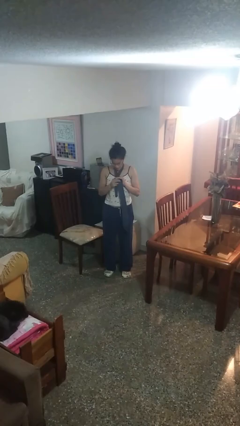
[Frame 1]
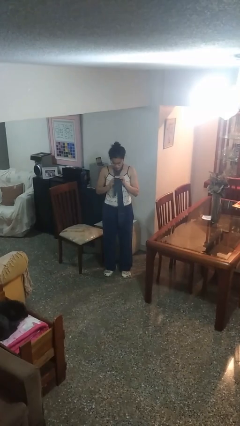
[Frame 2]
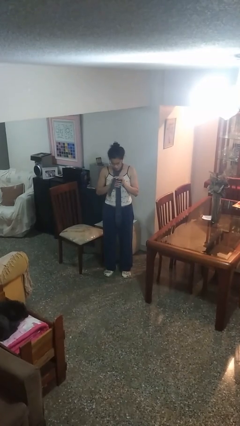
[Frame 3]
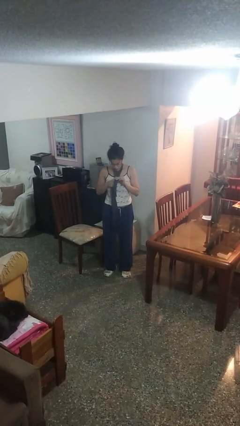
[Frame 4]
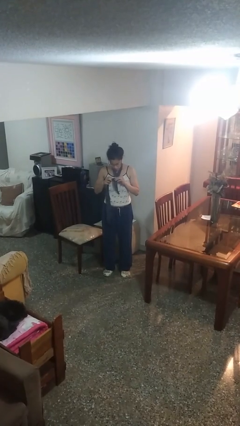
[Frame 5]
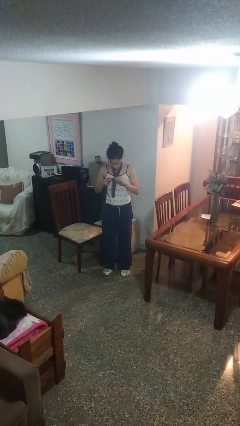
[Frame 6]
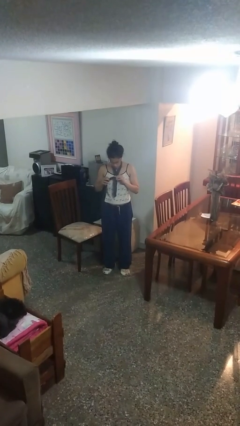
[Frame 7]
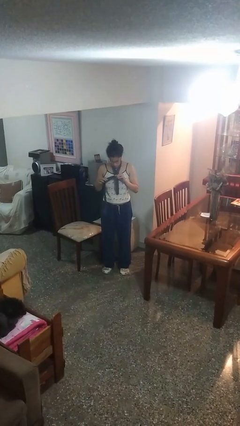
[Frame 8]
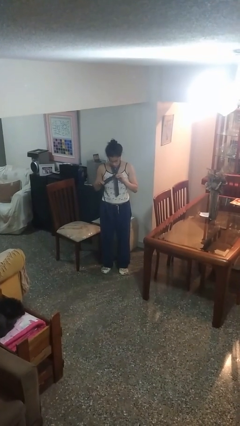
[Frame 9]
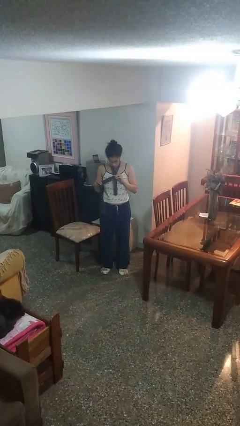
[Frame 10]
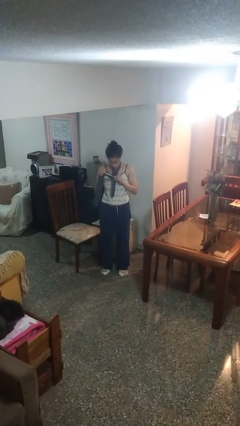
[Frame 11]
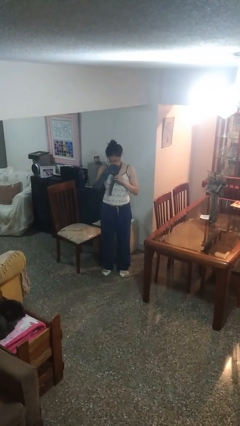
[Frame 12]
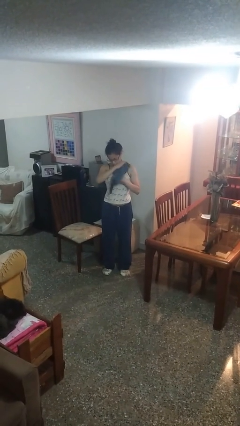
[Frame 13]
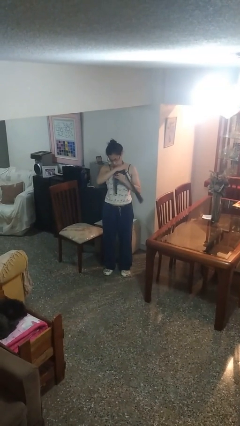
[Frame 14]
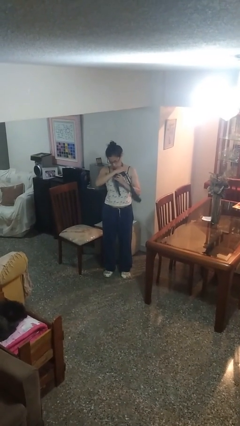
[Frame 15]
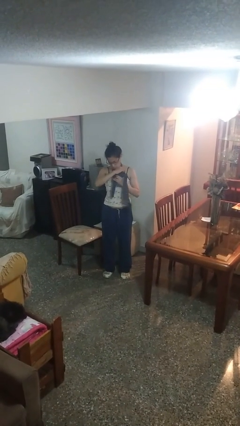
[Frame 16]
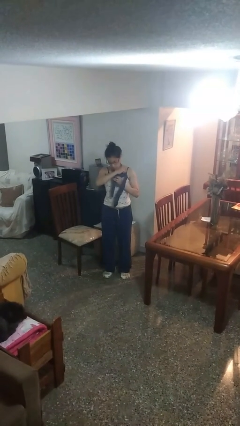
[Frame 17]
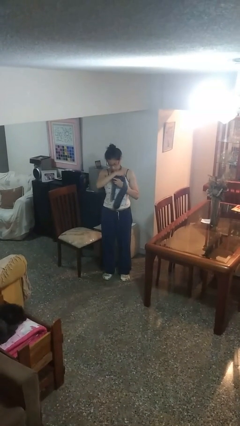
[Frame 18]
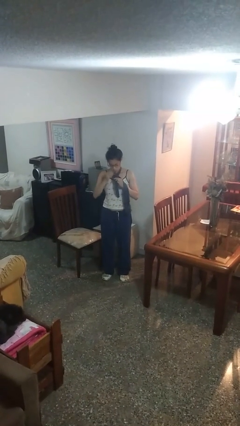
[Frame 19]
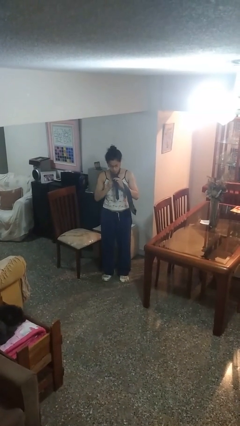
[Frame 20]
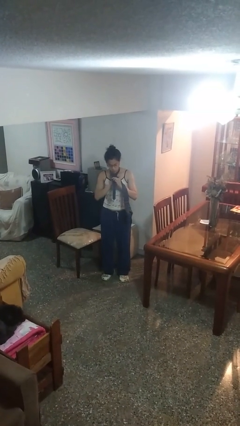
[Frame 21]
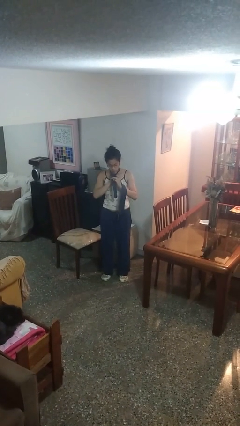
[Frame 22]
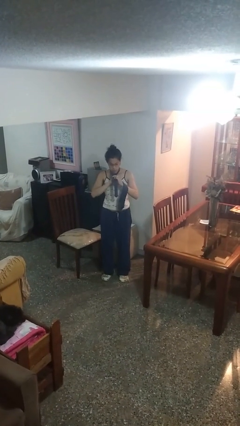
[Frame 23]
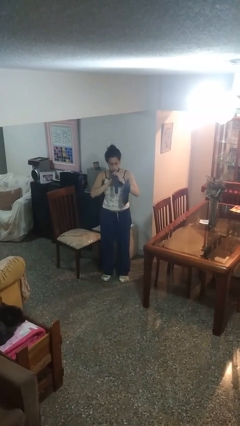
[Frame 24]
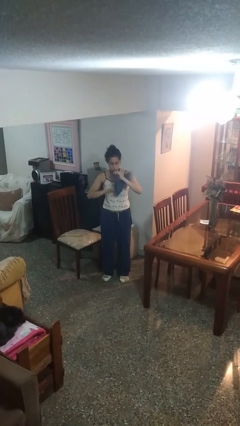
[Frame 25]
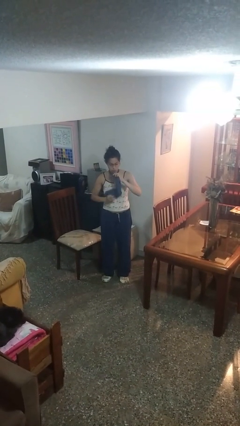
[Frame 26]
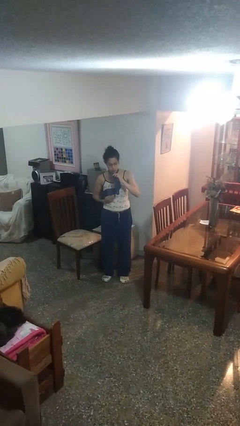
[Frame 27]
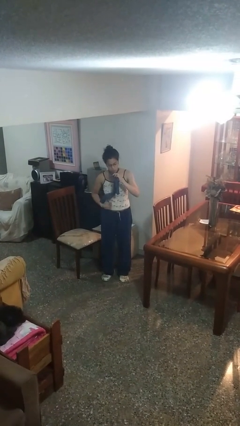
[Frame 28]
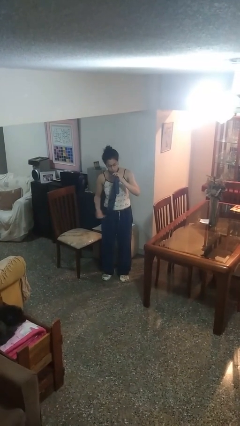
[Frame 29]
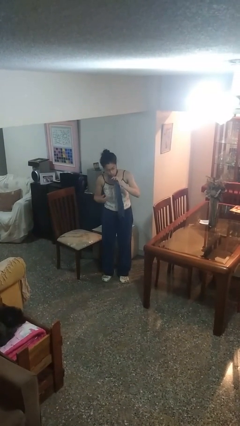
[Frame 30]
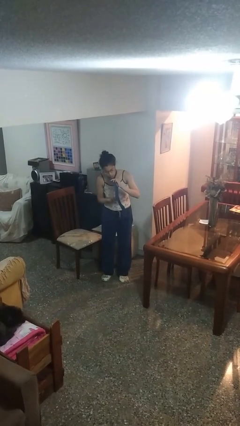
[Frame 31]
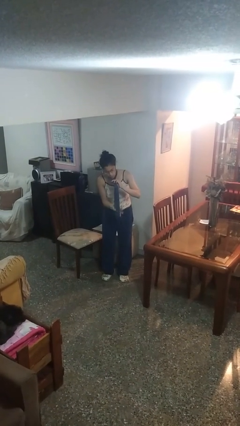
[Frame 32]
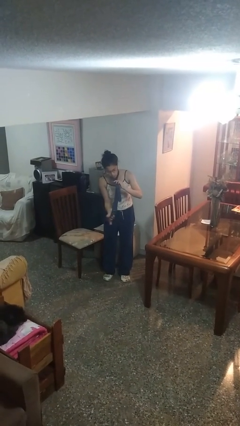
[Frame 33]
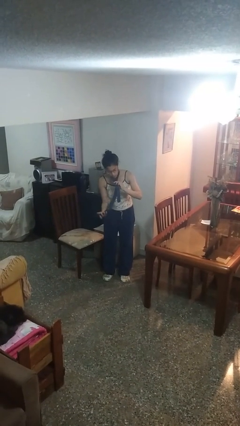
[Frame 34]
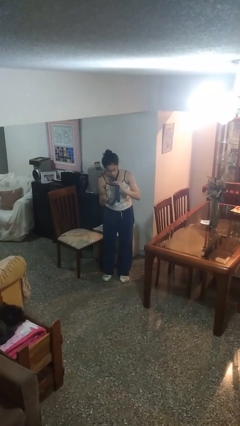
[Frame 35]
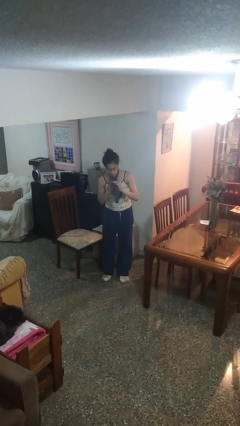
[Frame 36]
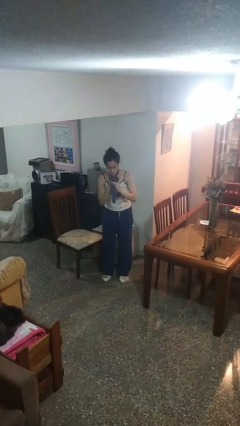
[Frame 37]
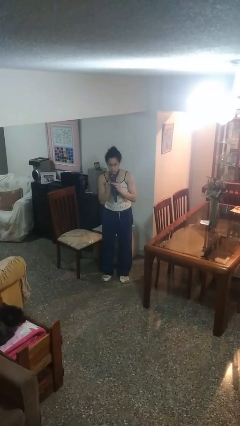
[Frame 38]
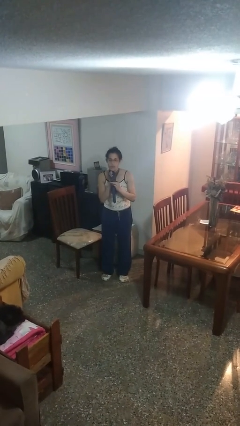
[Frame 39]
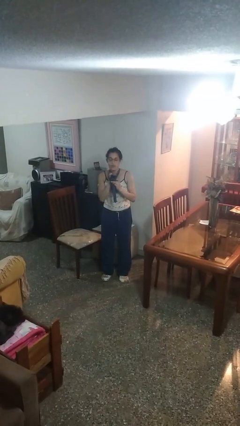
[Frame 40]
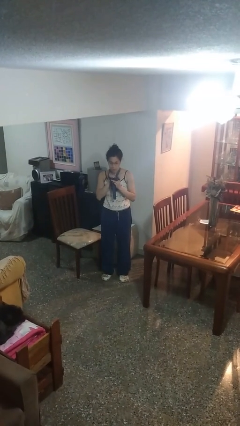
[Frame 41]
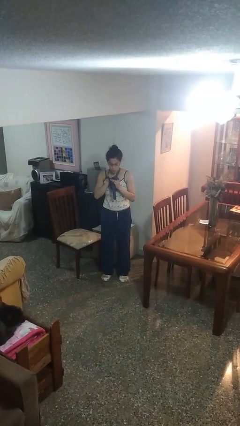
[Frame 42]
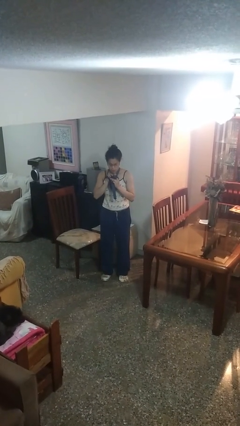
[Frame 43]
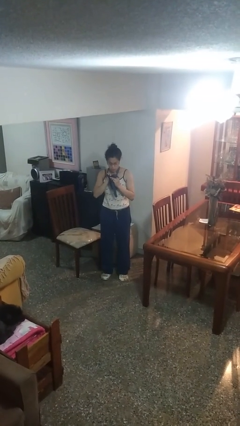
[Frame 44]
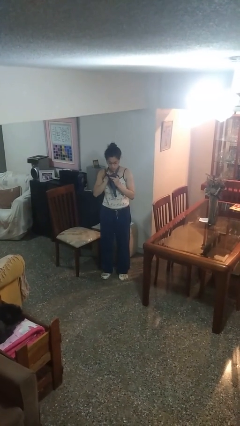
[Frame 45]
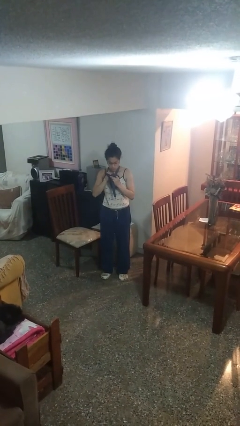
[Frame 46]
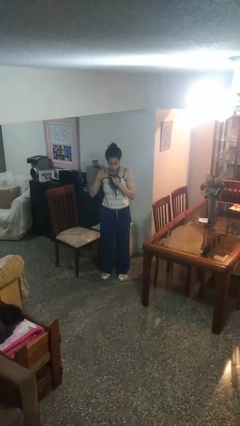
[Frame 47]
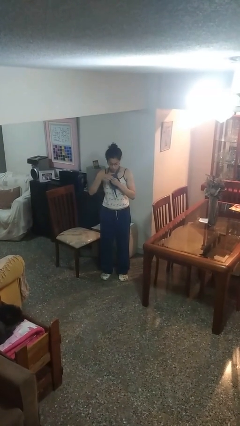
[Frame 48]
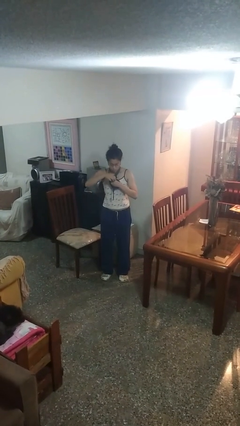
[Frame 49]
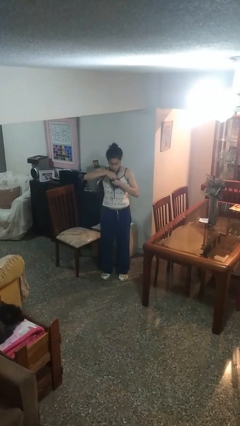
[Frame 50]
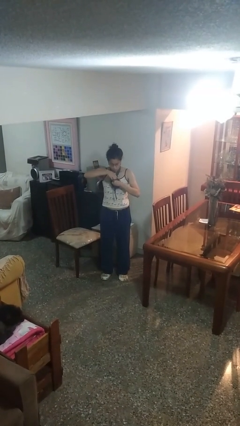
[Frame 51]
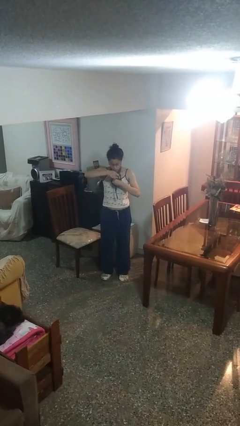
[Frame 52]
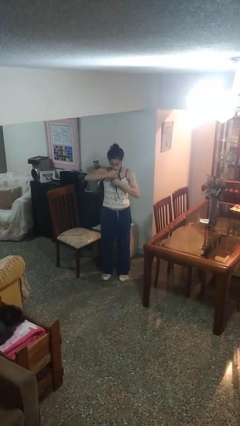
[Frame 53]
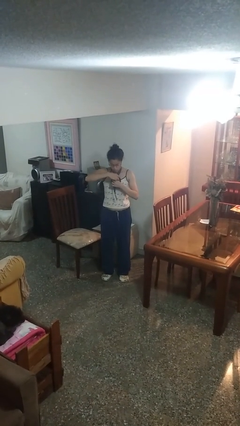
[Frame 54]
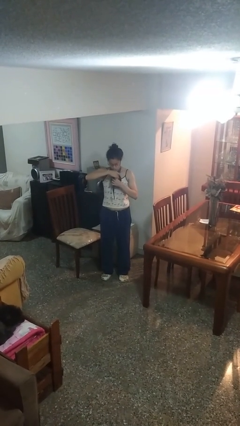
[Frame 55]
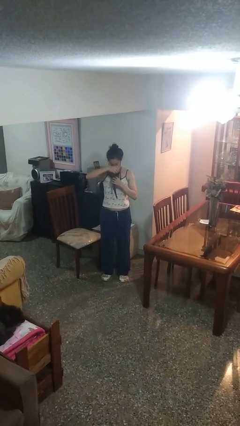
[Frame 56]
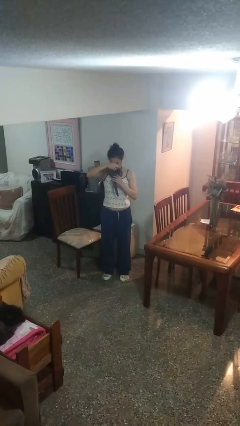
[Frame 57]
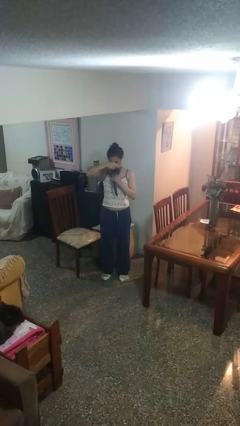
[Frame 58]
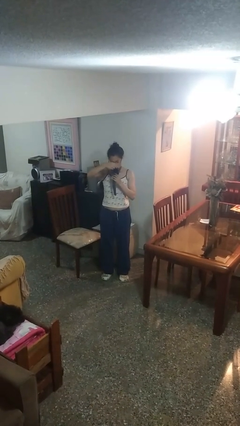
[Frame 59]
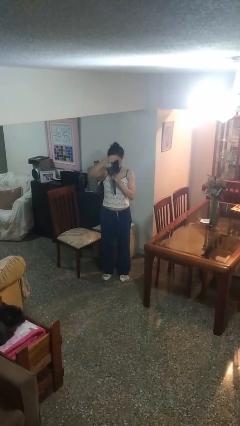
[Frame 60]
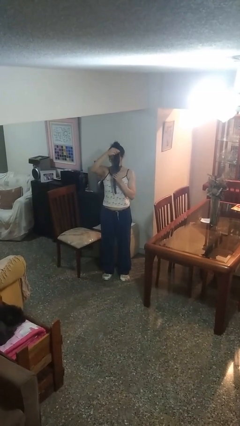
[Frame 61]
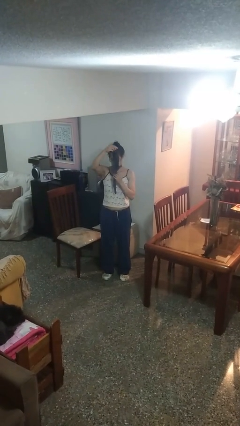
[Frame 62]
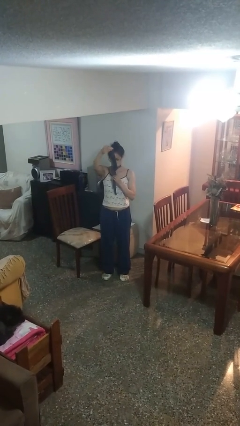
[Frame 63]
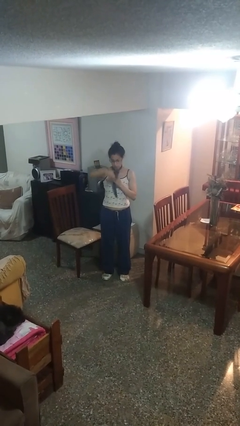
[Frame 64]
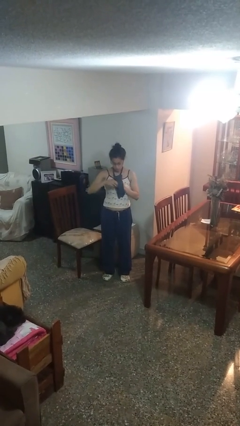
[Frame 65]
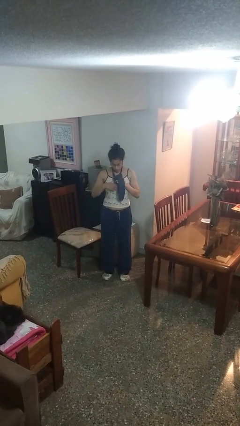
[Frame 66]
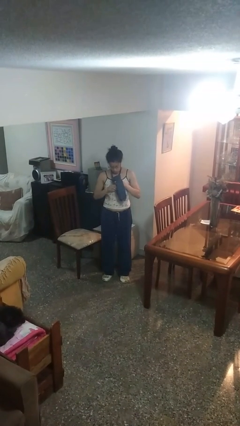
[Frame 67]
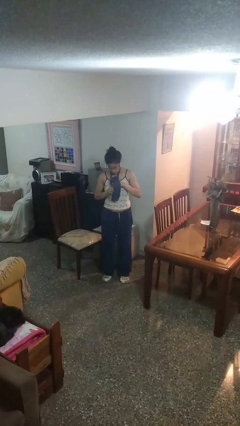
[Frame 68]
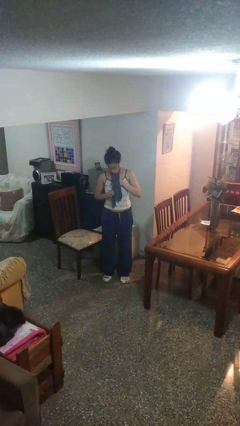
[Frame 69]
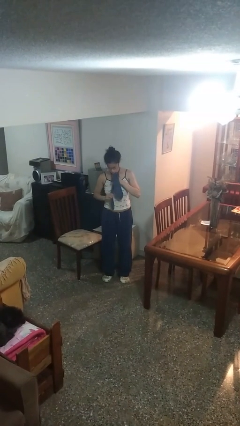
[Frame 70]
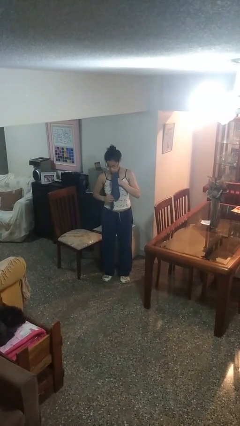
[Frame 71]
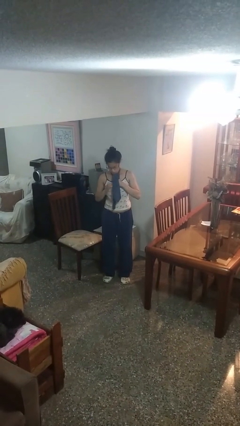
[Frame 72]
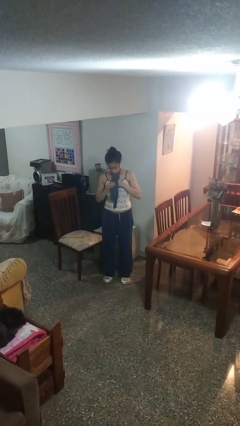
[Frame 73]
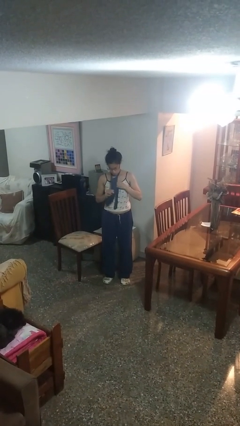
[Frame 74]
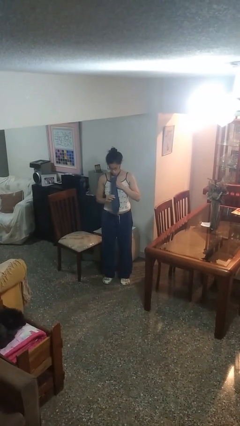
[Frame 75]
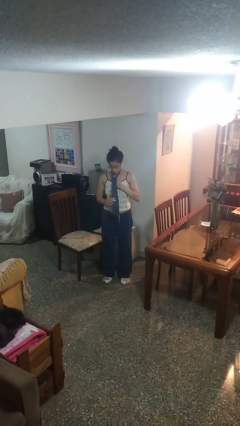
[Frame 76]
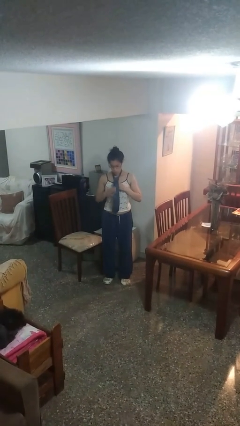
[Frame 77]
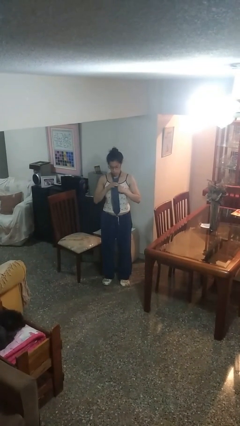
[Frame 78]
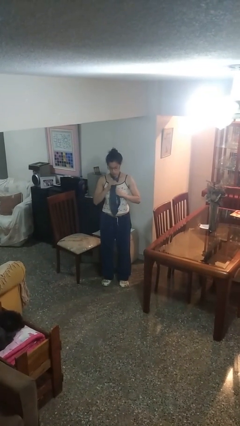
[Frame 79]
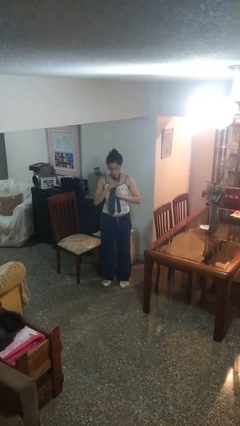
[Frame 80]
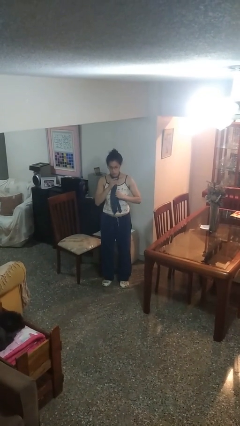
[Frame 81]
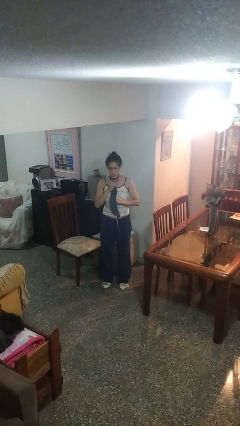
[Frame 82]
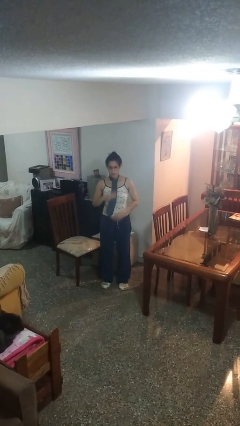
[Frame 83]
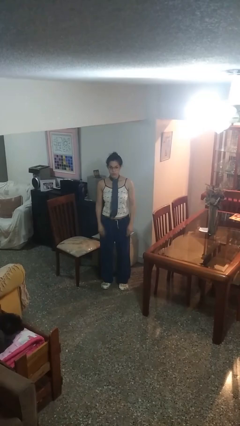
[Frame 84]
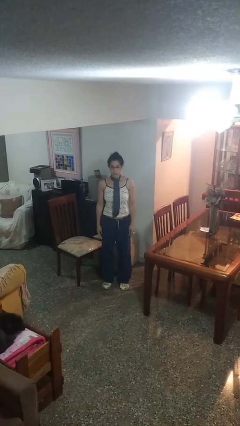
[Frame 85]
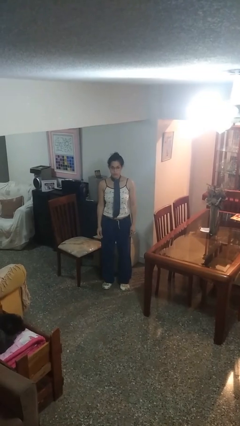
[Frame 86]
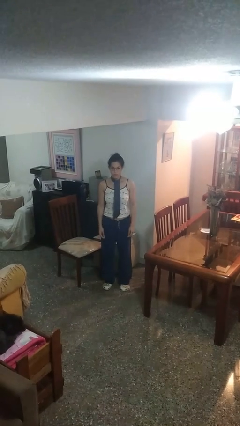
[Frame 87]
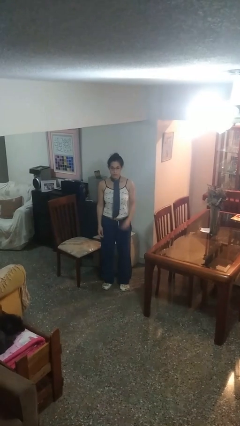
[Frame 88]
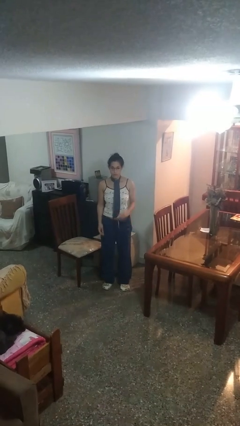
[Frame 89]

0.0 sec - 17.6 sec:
person puts on necktie

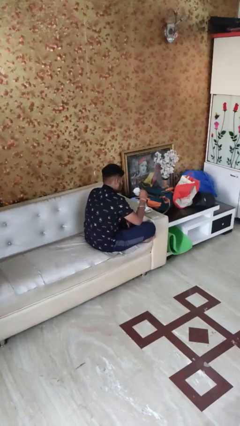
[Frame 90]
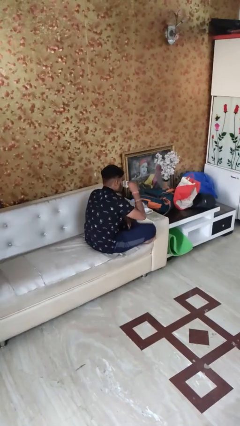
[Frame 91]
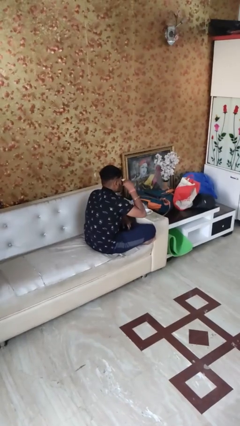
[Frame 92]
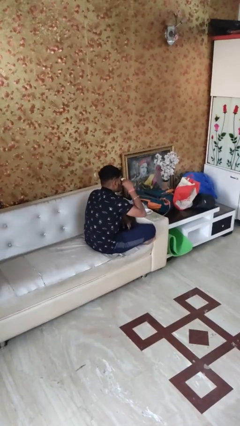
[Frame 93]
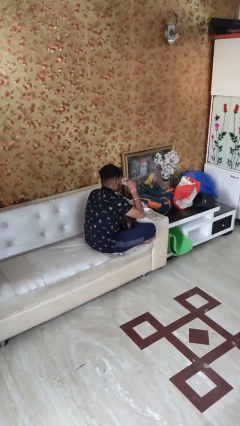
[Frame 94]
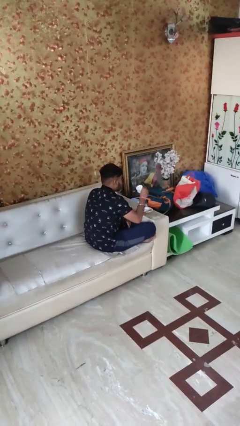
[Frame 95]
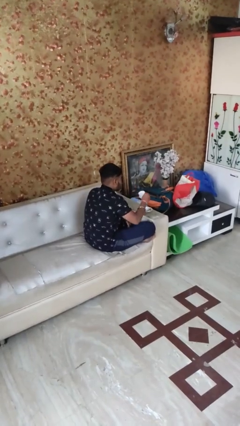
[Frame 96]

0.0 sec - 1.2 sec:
person drinks from mug
